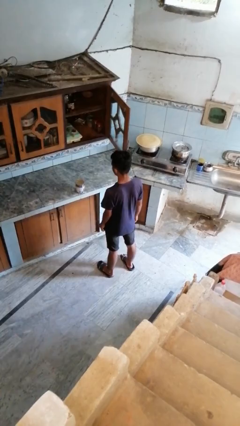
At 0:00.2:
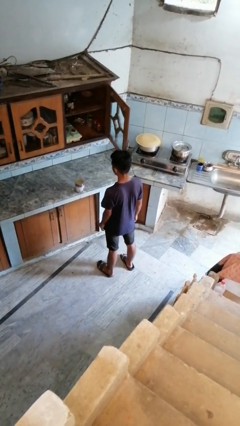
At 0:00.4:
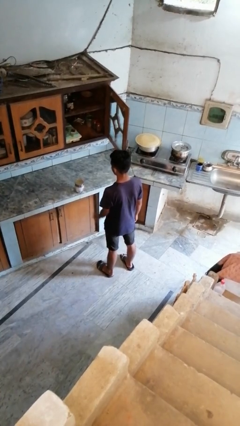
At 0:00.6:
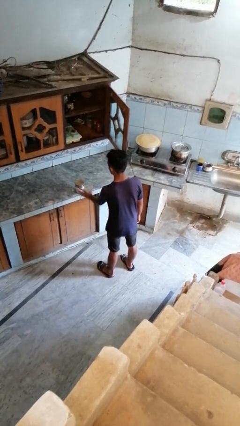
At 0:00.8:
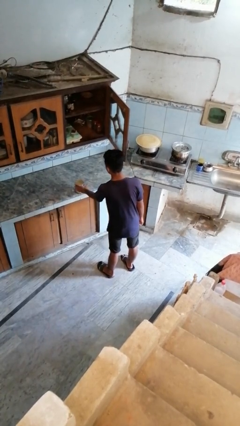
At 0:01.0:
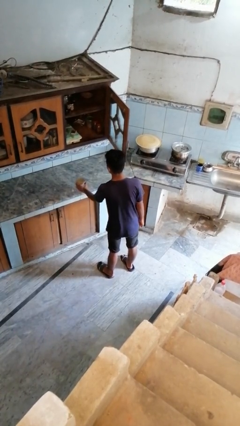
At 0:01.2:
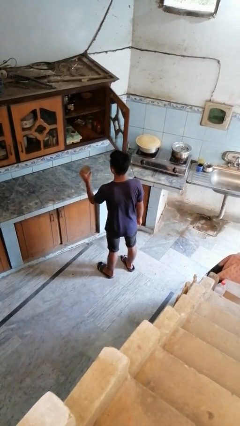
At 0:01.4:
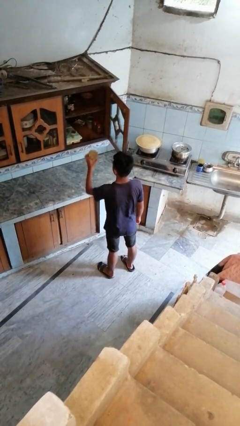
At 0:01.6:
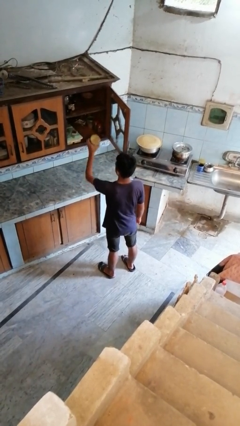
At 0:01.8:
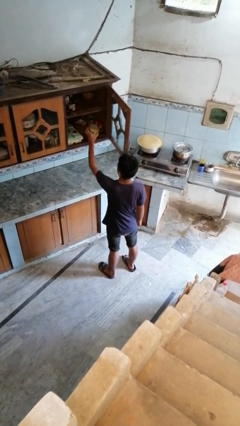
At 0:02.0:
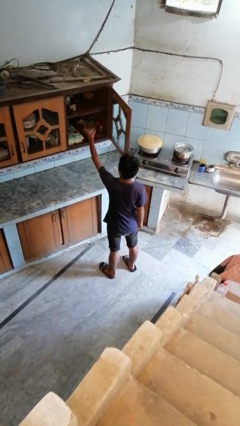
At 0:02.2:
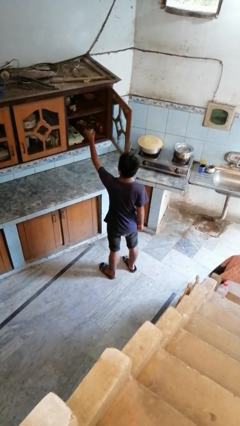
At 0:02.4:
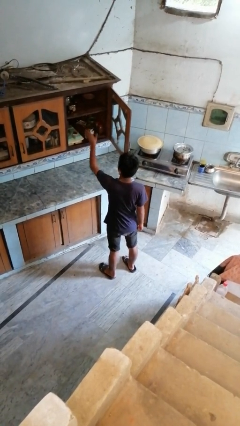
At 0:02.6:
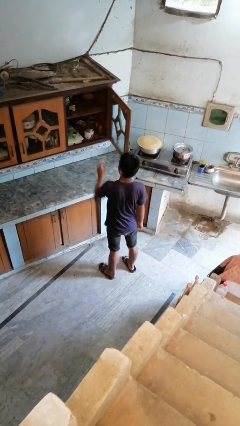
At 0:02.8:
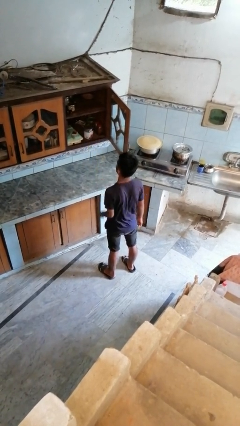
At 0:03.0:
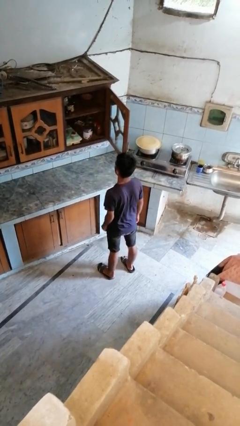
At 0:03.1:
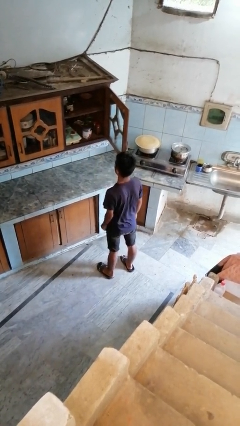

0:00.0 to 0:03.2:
person puts object in cabinet

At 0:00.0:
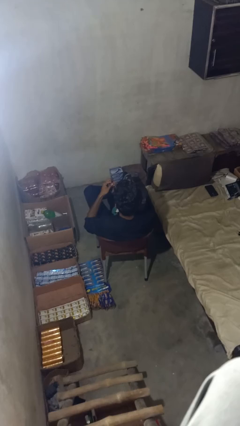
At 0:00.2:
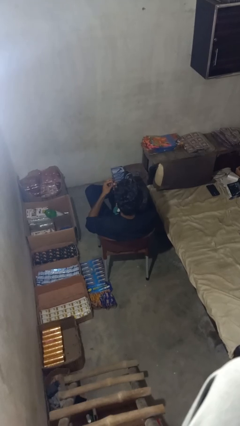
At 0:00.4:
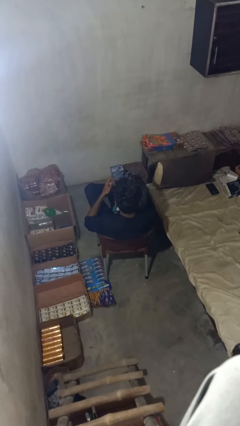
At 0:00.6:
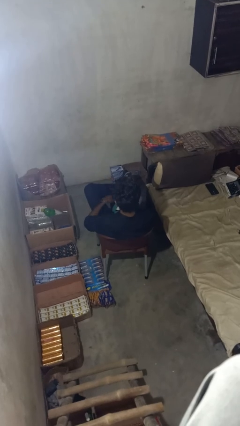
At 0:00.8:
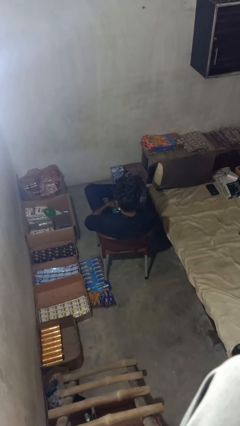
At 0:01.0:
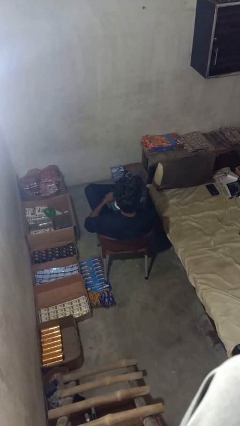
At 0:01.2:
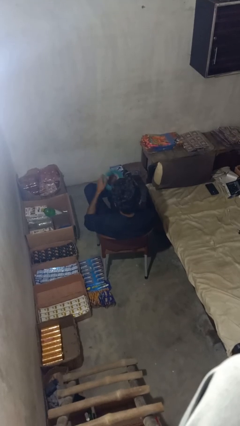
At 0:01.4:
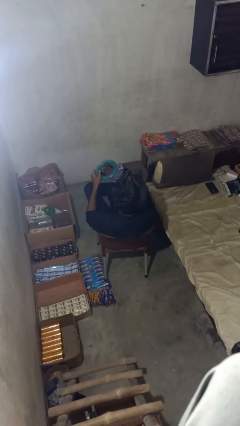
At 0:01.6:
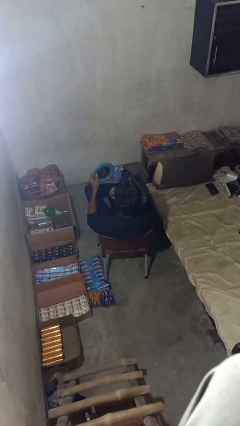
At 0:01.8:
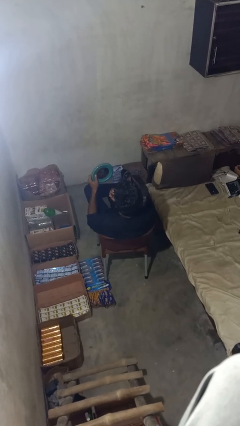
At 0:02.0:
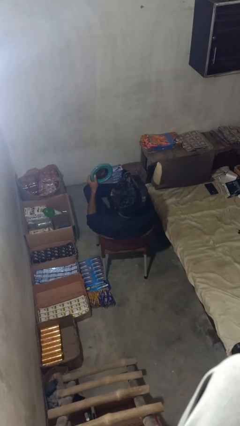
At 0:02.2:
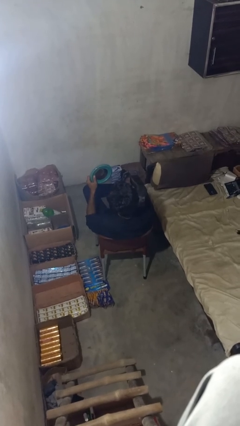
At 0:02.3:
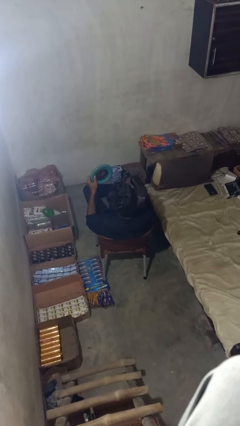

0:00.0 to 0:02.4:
person applies lip makeup

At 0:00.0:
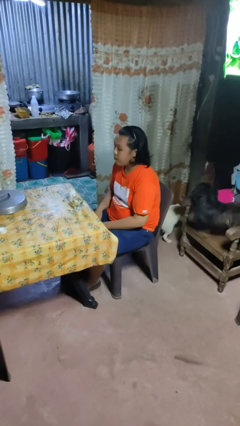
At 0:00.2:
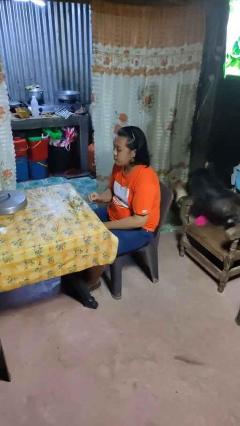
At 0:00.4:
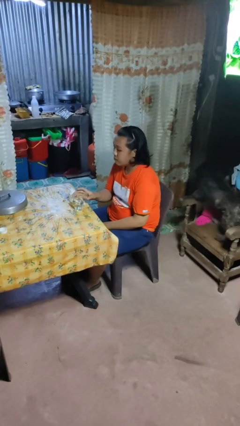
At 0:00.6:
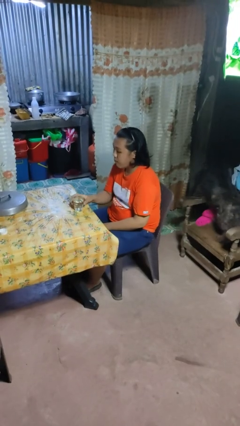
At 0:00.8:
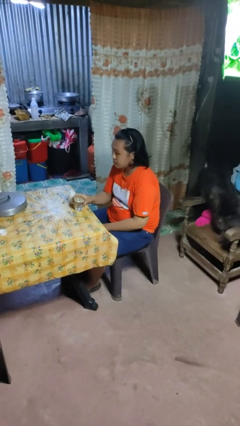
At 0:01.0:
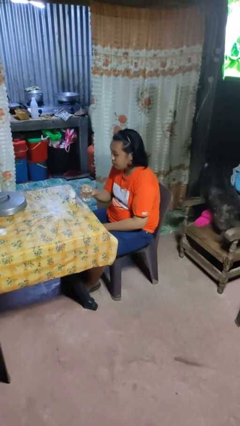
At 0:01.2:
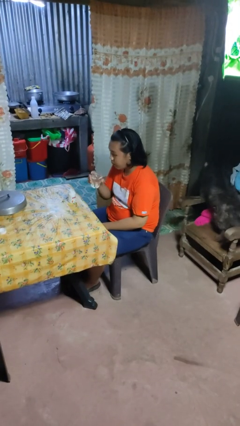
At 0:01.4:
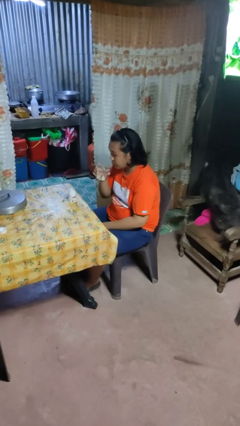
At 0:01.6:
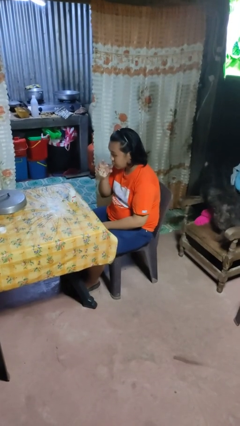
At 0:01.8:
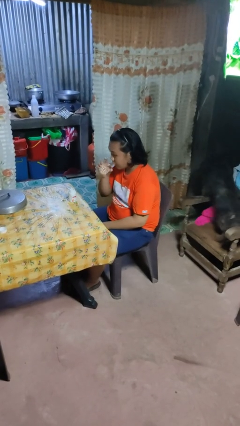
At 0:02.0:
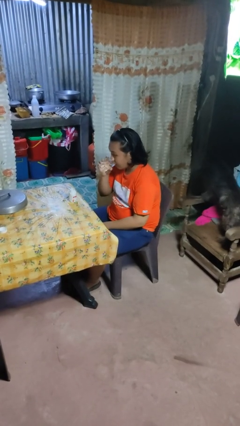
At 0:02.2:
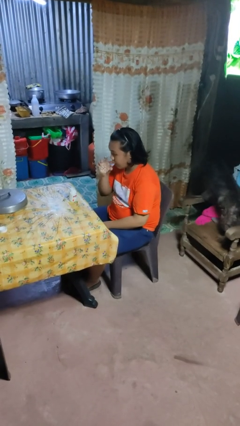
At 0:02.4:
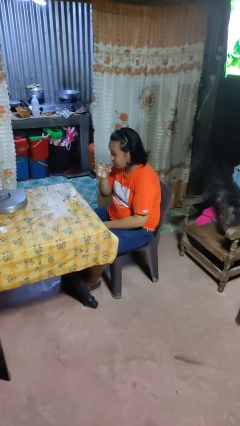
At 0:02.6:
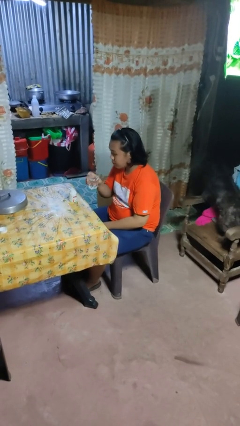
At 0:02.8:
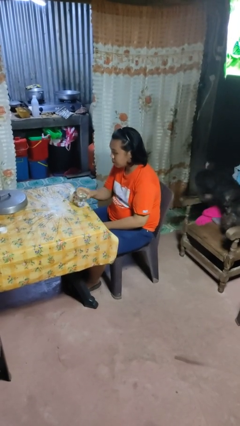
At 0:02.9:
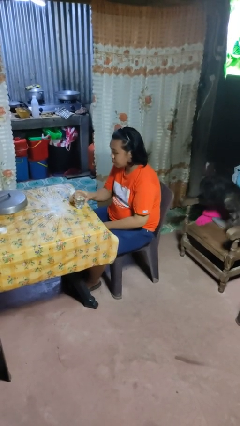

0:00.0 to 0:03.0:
person drinks from cup

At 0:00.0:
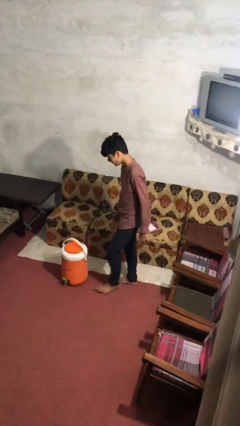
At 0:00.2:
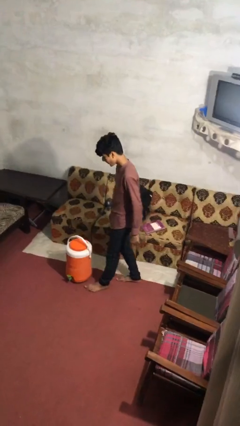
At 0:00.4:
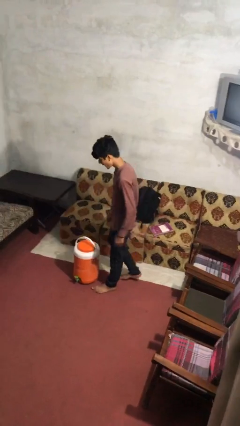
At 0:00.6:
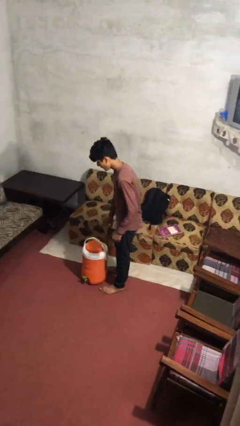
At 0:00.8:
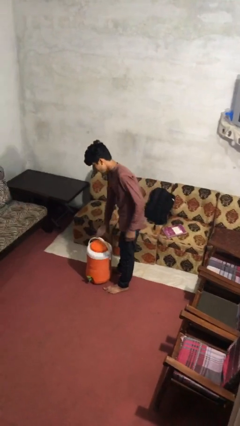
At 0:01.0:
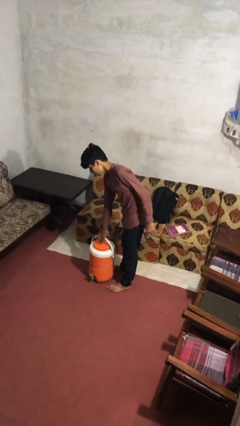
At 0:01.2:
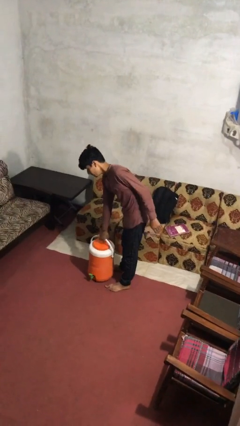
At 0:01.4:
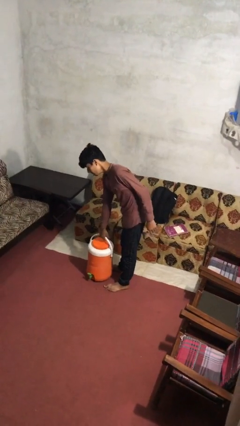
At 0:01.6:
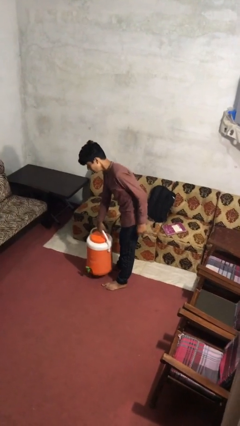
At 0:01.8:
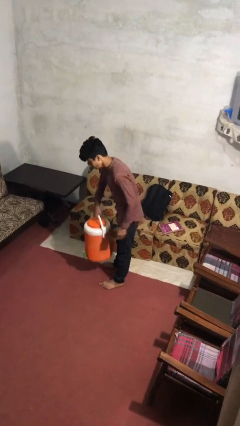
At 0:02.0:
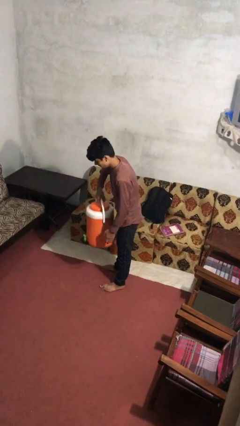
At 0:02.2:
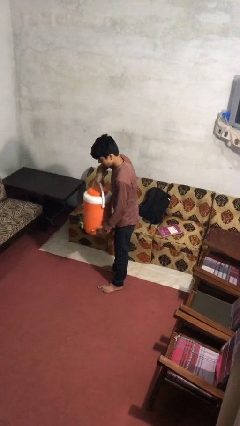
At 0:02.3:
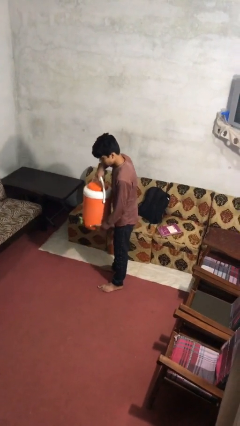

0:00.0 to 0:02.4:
person picks up object from floor

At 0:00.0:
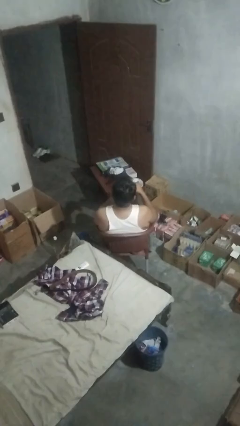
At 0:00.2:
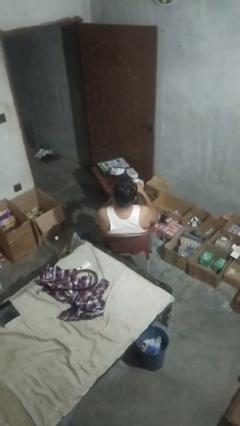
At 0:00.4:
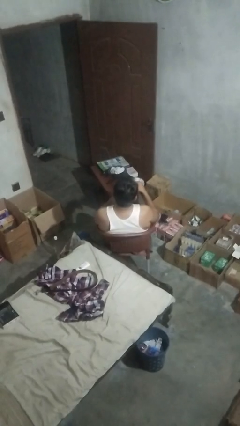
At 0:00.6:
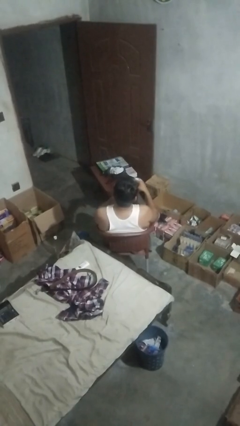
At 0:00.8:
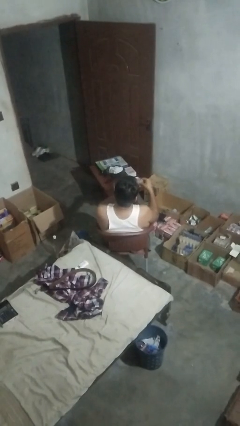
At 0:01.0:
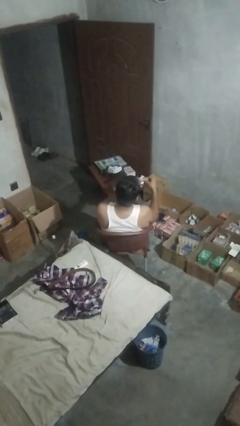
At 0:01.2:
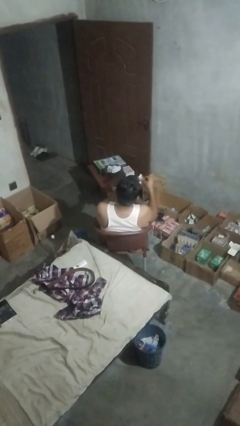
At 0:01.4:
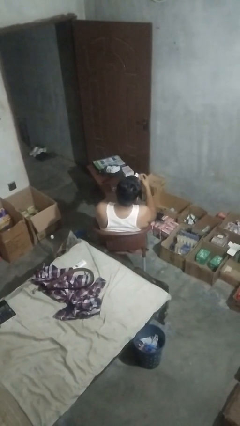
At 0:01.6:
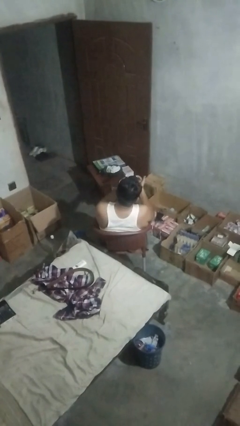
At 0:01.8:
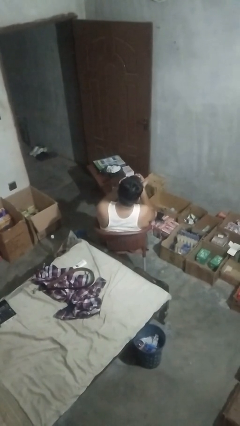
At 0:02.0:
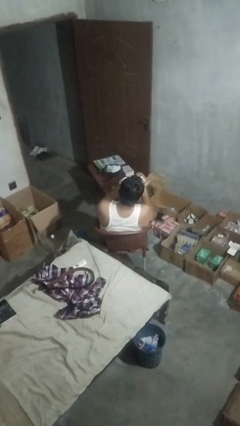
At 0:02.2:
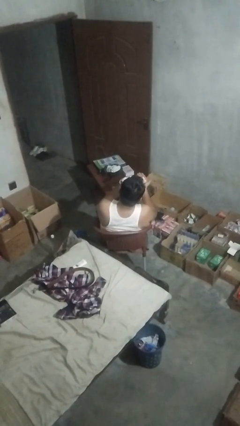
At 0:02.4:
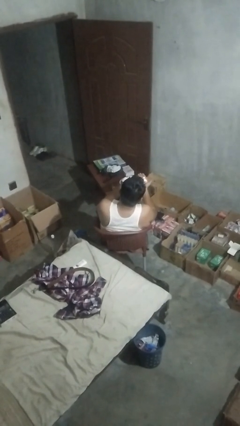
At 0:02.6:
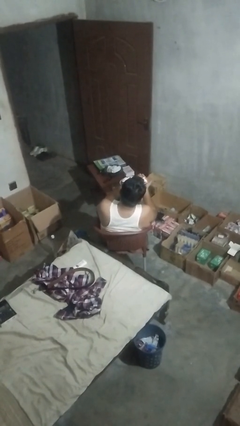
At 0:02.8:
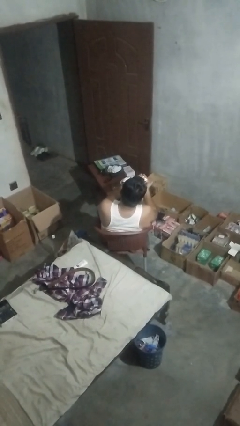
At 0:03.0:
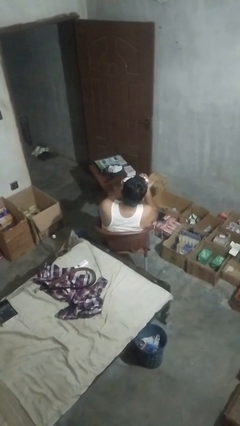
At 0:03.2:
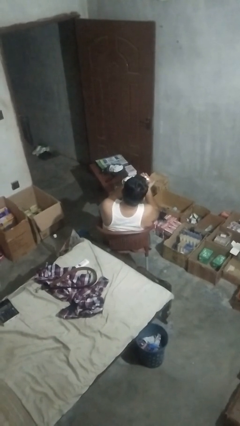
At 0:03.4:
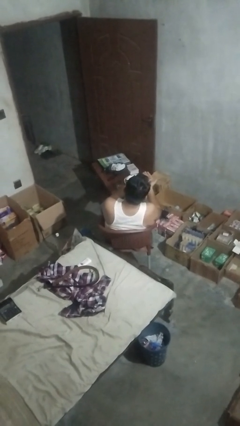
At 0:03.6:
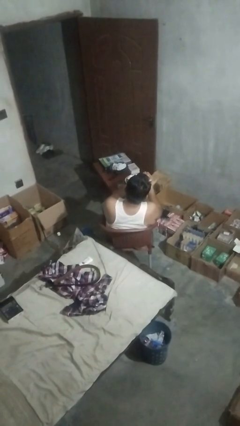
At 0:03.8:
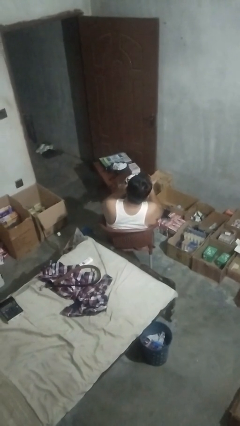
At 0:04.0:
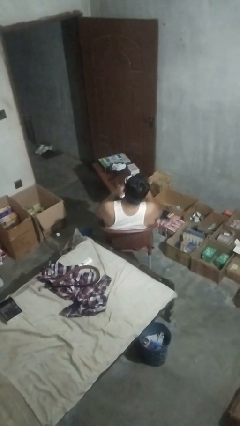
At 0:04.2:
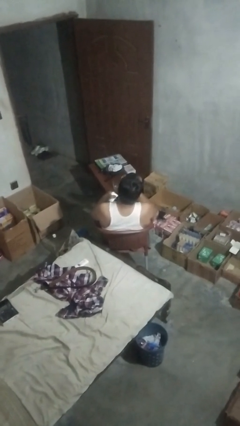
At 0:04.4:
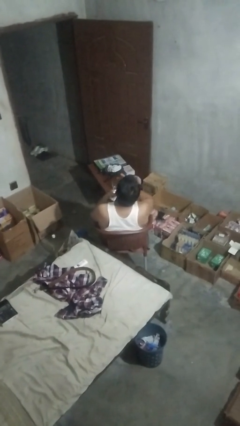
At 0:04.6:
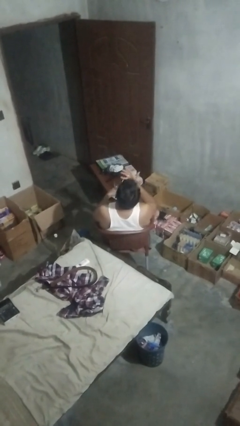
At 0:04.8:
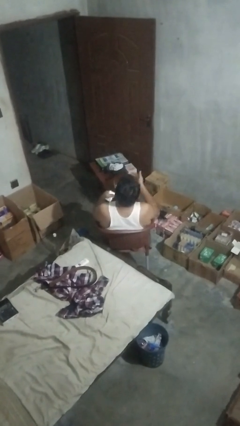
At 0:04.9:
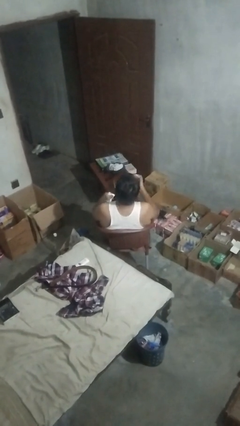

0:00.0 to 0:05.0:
person takes medicine pills

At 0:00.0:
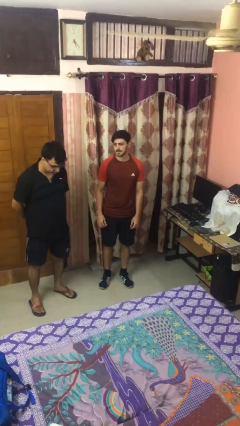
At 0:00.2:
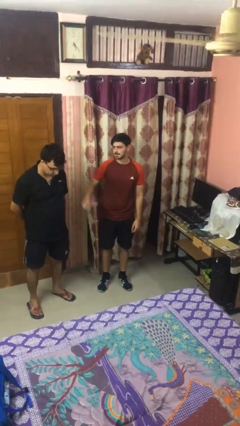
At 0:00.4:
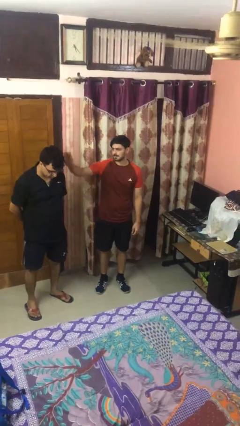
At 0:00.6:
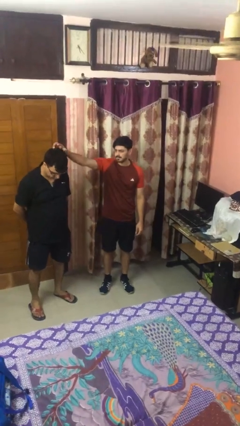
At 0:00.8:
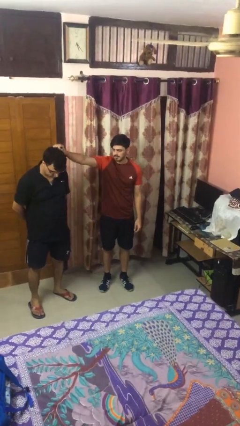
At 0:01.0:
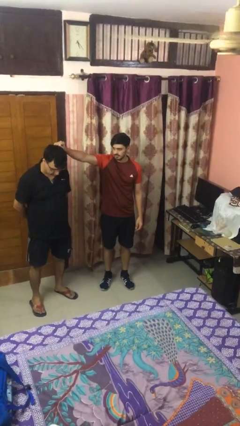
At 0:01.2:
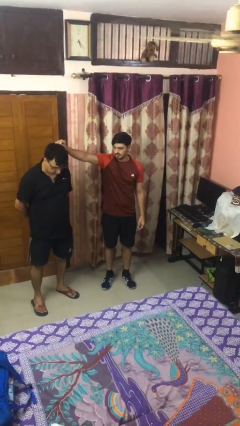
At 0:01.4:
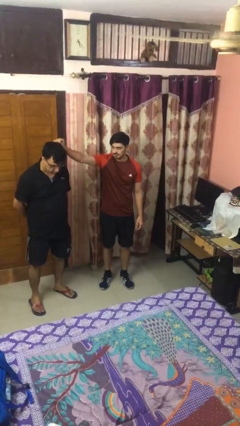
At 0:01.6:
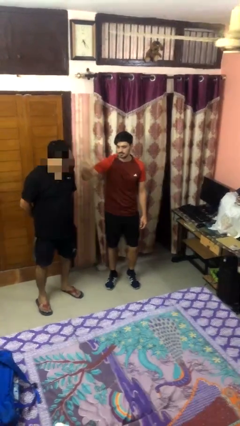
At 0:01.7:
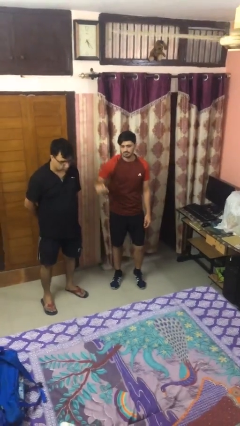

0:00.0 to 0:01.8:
person grabs person by hair
